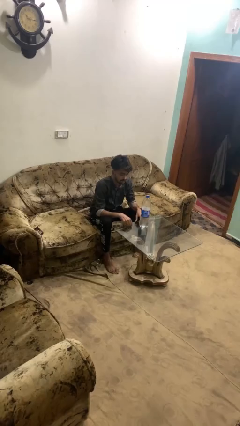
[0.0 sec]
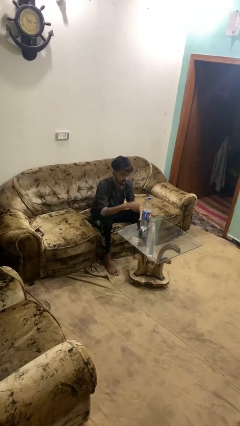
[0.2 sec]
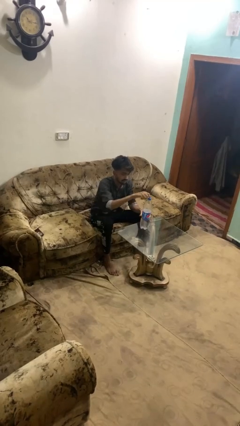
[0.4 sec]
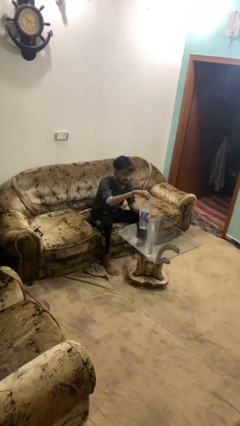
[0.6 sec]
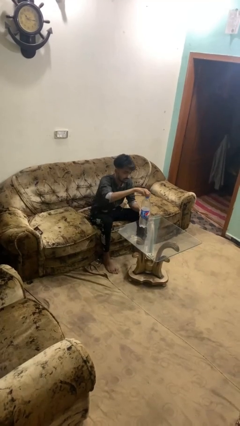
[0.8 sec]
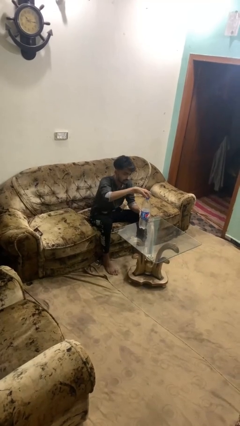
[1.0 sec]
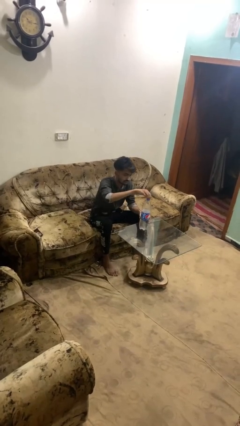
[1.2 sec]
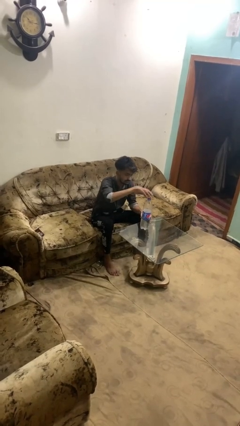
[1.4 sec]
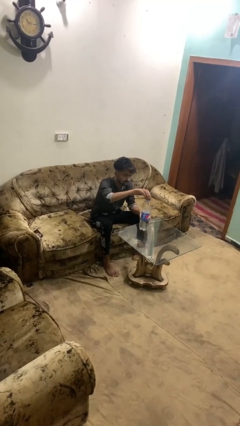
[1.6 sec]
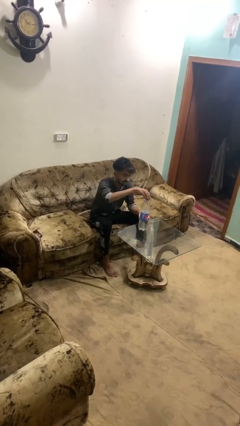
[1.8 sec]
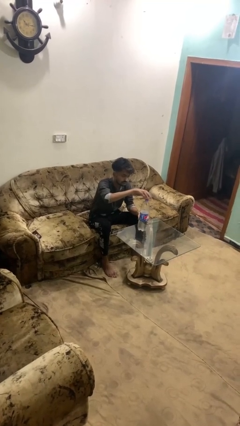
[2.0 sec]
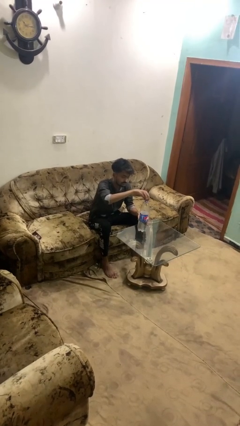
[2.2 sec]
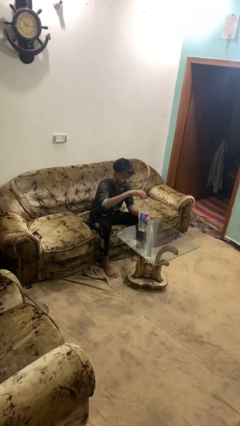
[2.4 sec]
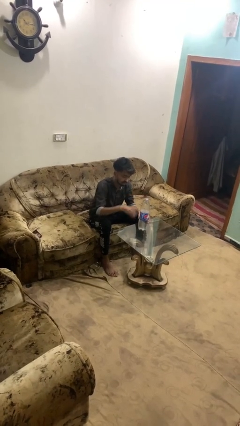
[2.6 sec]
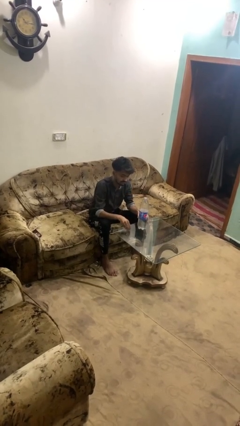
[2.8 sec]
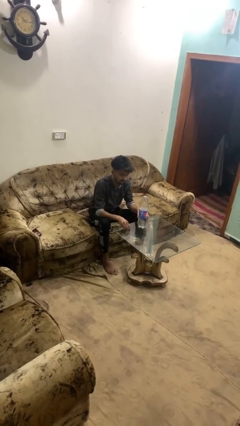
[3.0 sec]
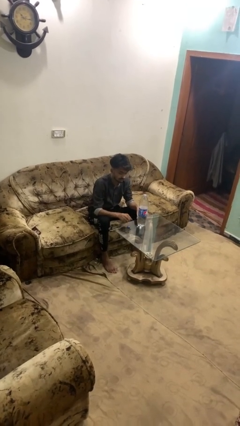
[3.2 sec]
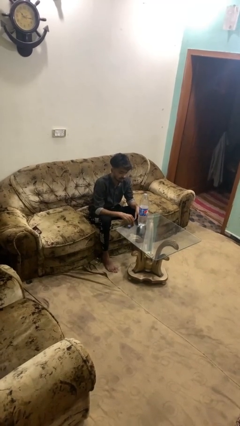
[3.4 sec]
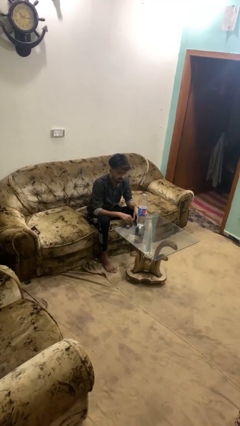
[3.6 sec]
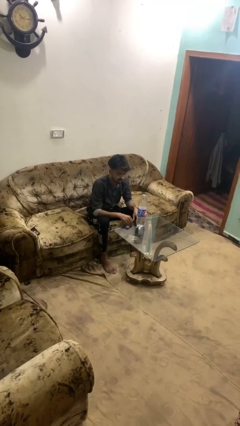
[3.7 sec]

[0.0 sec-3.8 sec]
person unscrews lid from bottle

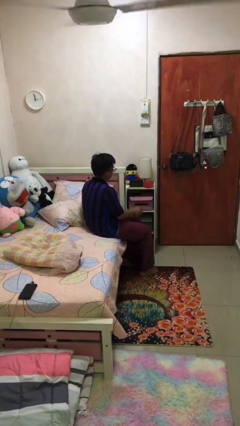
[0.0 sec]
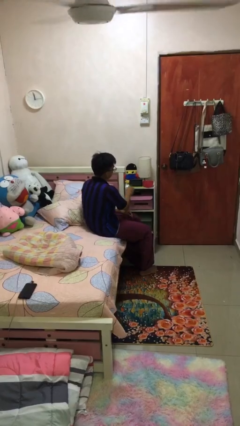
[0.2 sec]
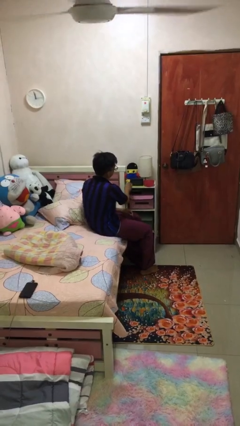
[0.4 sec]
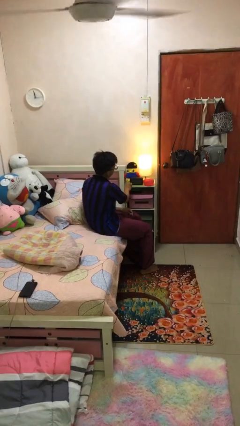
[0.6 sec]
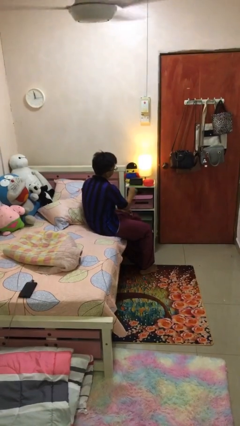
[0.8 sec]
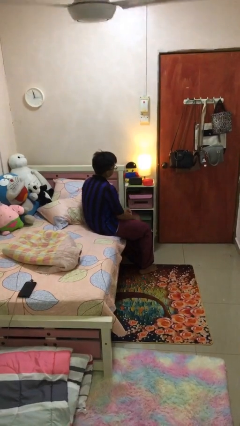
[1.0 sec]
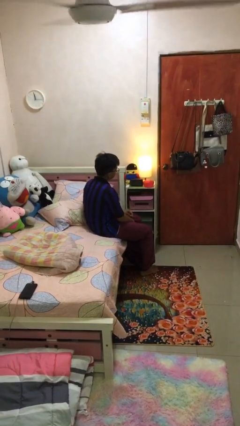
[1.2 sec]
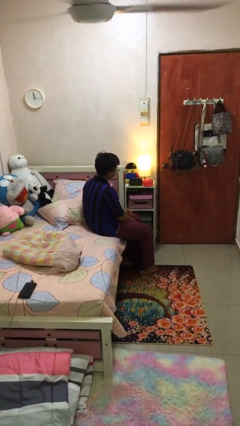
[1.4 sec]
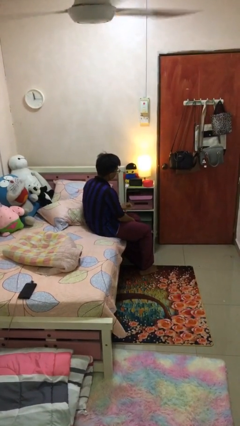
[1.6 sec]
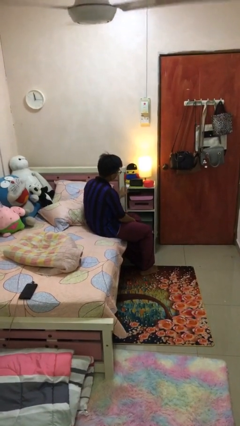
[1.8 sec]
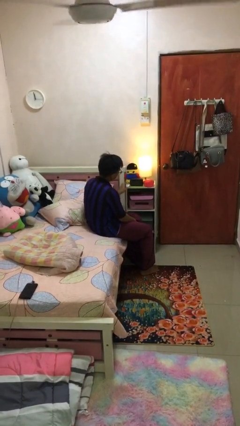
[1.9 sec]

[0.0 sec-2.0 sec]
person turns on lamp

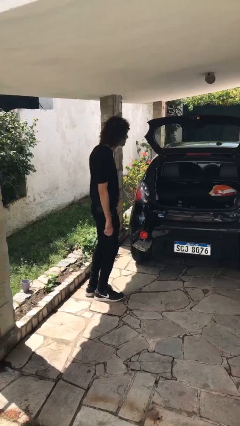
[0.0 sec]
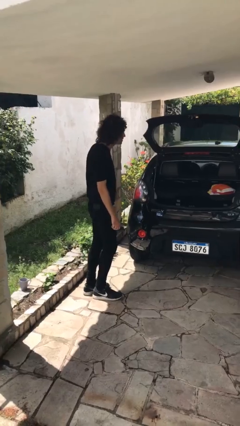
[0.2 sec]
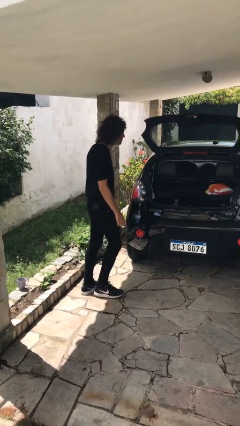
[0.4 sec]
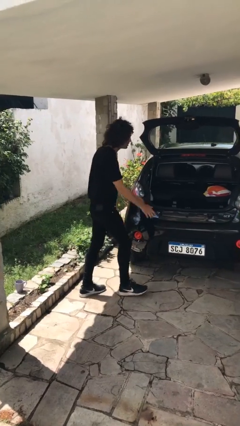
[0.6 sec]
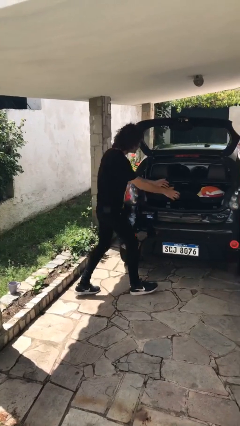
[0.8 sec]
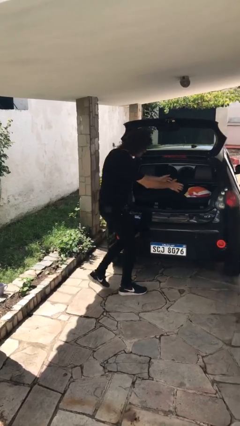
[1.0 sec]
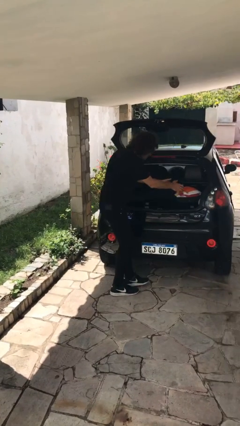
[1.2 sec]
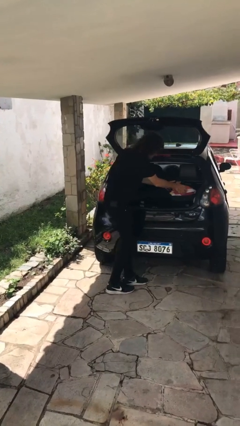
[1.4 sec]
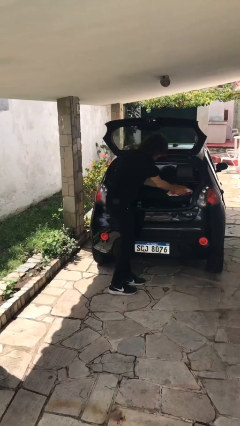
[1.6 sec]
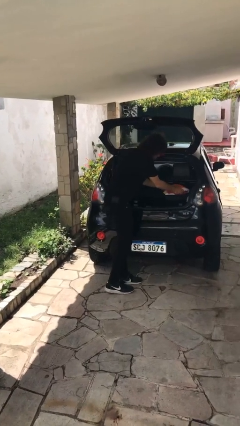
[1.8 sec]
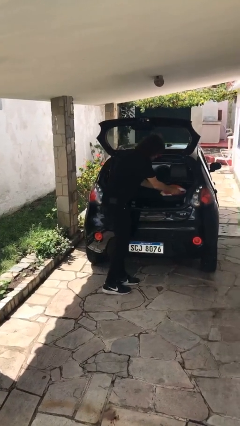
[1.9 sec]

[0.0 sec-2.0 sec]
person unloads car

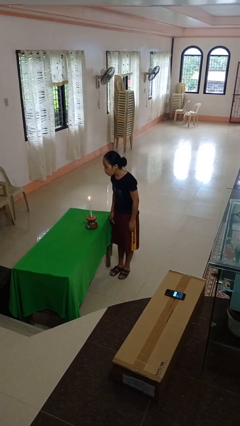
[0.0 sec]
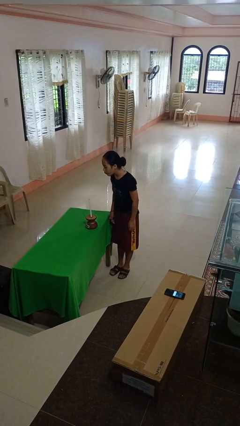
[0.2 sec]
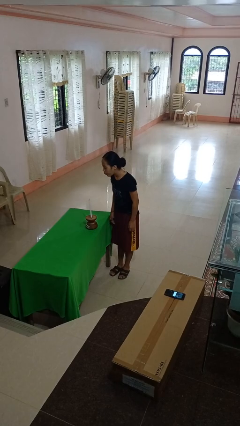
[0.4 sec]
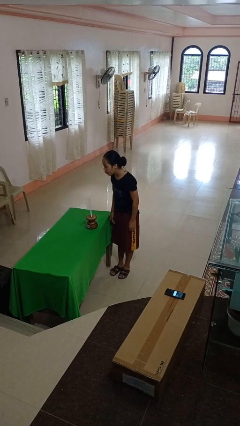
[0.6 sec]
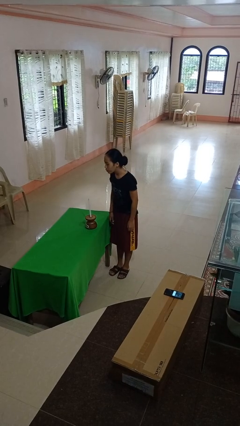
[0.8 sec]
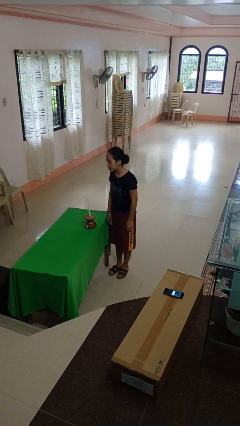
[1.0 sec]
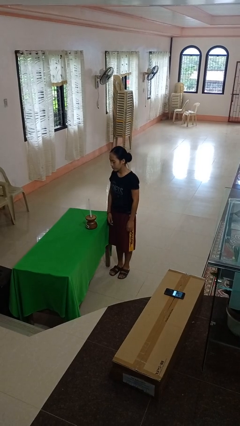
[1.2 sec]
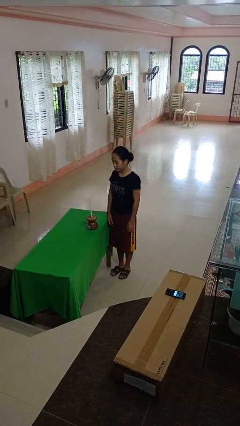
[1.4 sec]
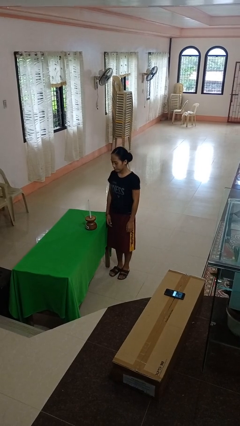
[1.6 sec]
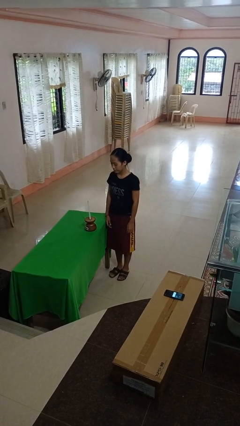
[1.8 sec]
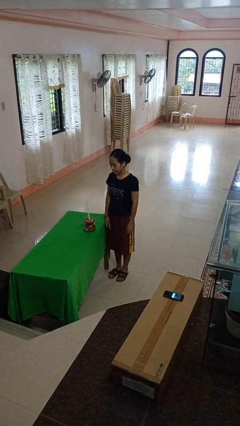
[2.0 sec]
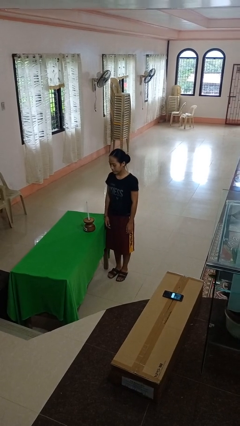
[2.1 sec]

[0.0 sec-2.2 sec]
person extinguishes candle

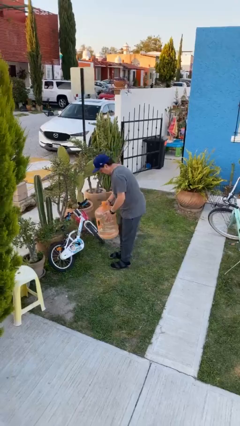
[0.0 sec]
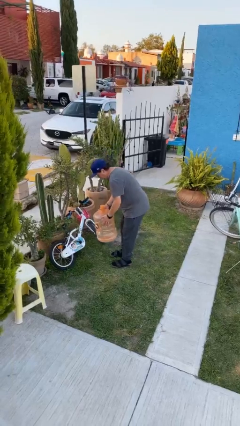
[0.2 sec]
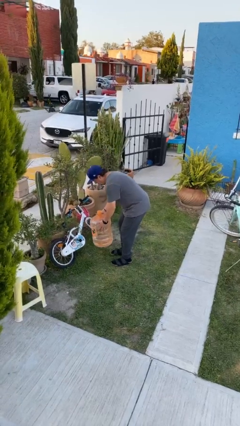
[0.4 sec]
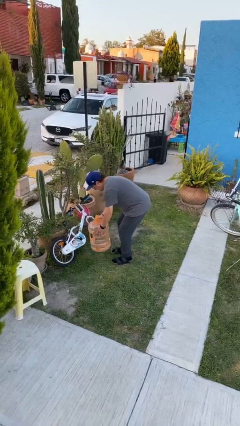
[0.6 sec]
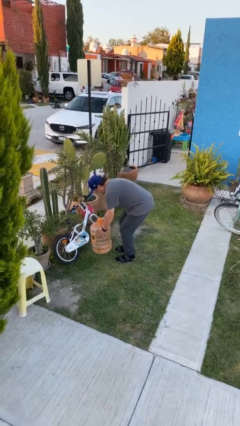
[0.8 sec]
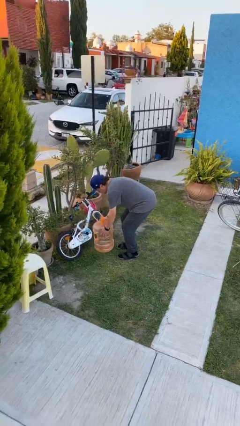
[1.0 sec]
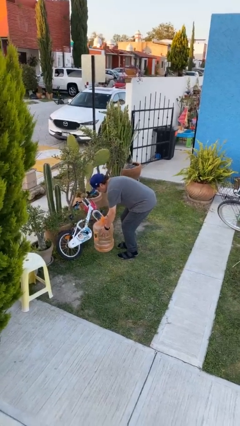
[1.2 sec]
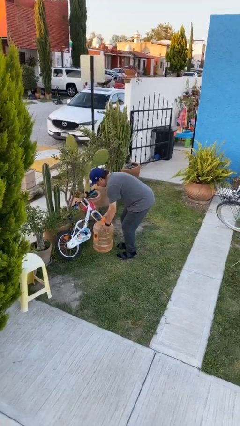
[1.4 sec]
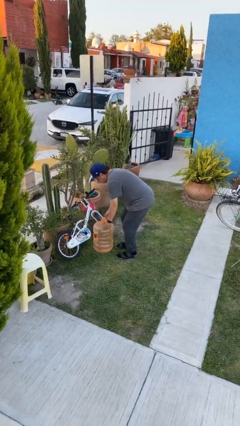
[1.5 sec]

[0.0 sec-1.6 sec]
person puts down object on floor

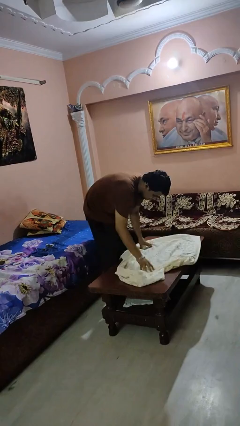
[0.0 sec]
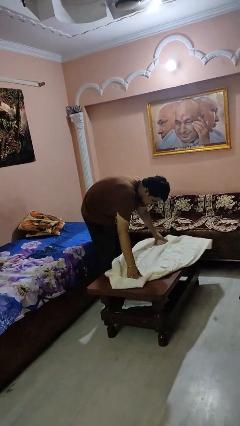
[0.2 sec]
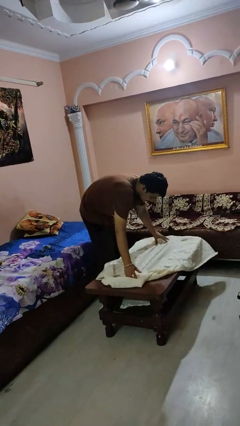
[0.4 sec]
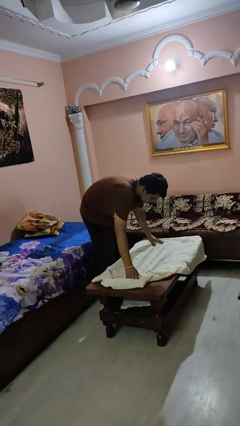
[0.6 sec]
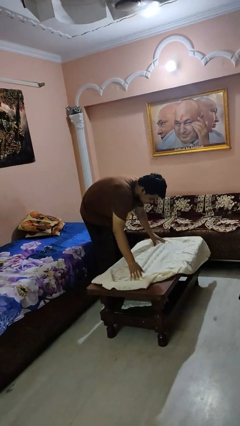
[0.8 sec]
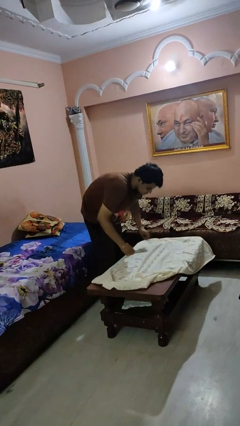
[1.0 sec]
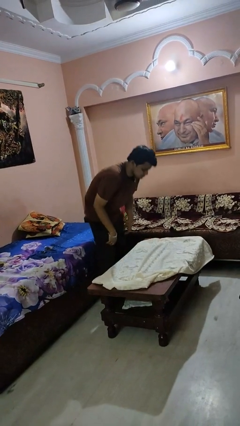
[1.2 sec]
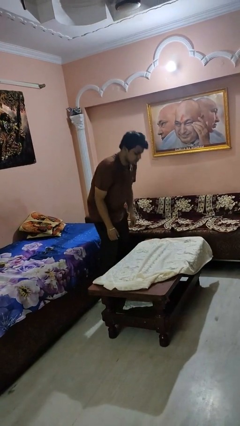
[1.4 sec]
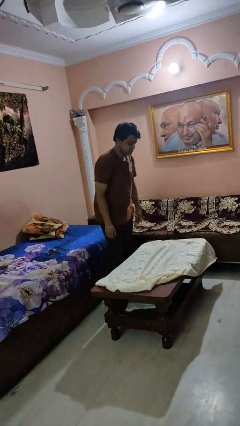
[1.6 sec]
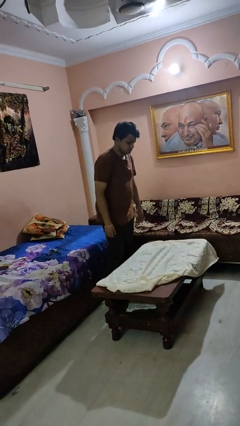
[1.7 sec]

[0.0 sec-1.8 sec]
person spreads tablecloth

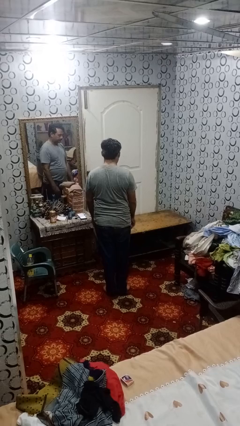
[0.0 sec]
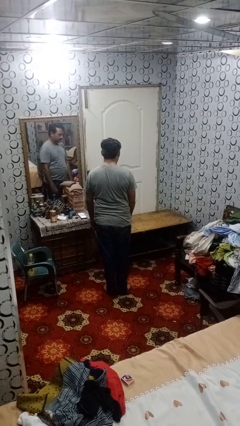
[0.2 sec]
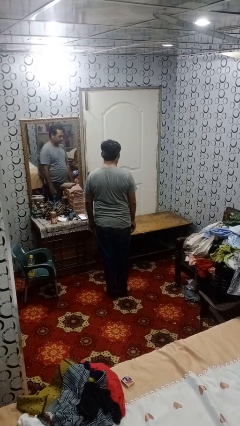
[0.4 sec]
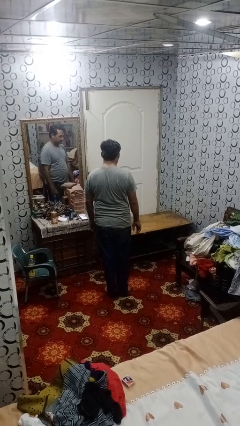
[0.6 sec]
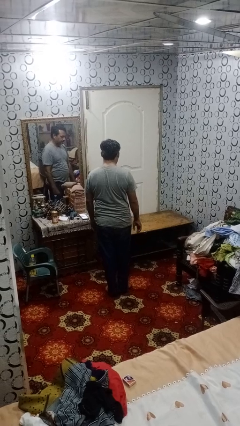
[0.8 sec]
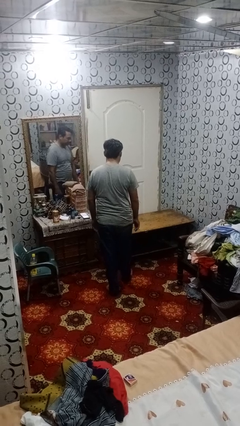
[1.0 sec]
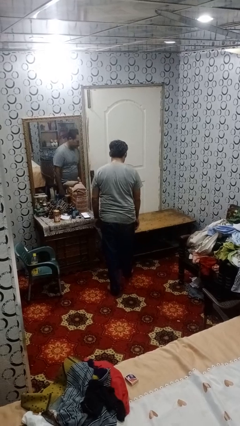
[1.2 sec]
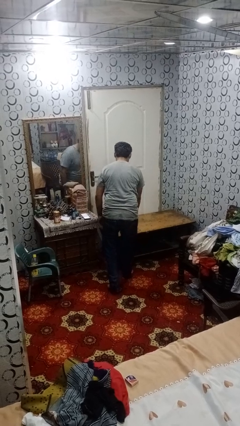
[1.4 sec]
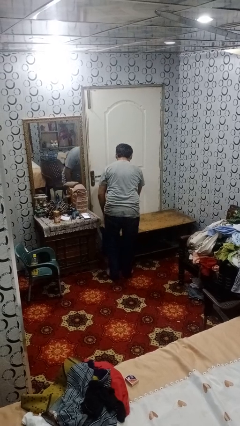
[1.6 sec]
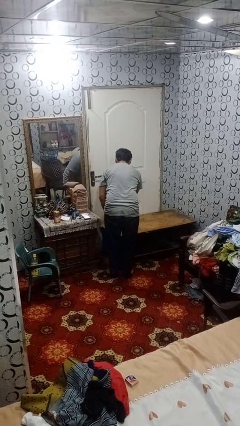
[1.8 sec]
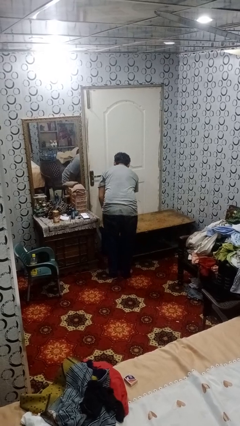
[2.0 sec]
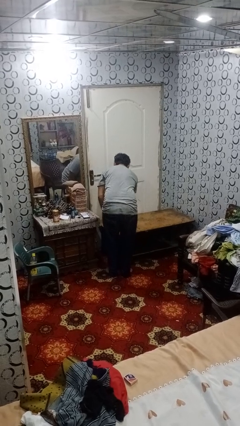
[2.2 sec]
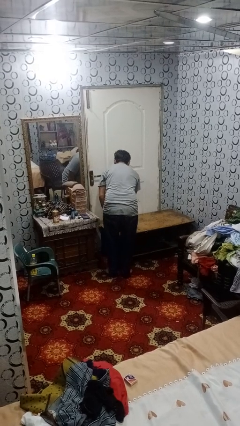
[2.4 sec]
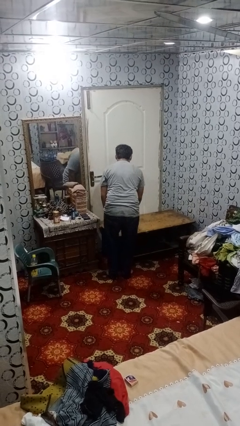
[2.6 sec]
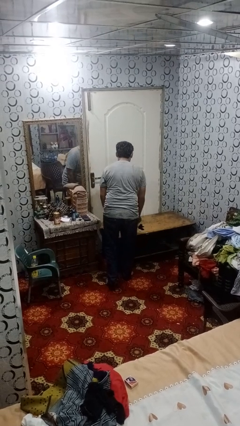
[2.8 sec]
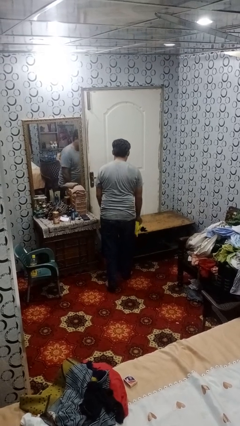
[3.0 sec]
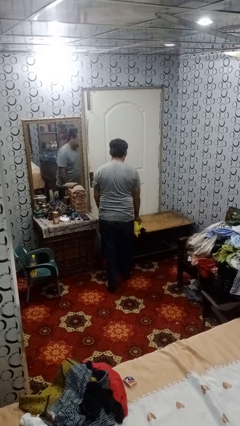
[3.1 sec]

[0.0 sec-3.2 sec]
person picks up object from table
